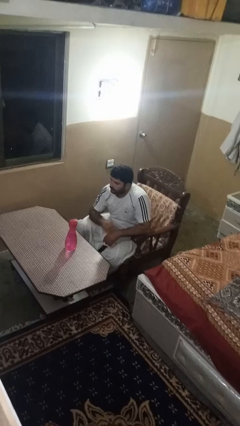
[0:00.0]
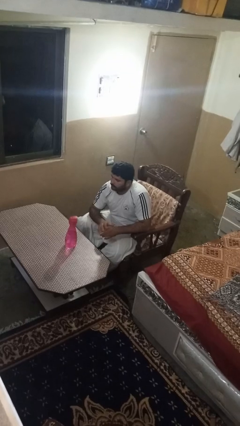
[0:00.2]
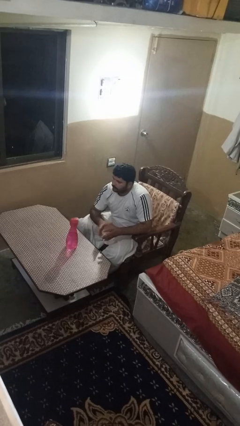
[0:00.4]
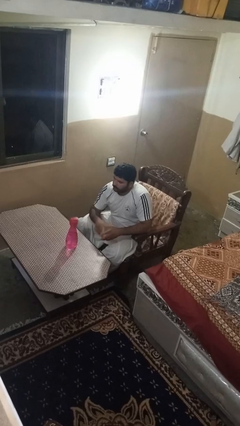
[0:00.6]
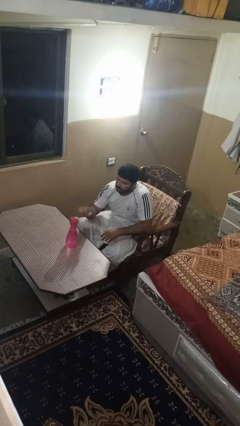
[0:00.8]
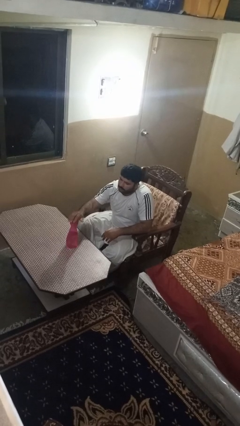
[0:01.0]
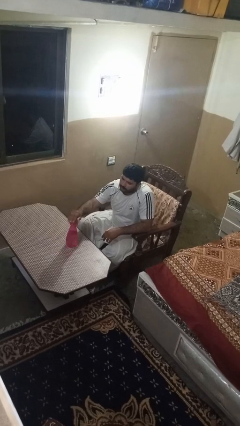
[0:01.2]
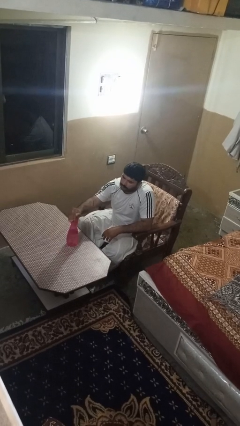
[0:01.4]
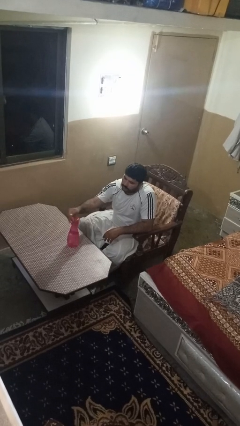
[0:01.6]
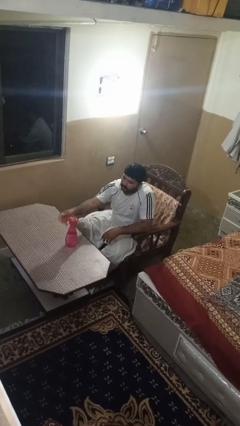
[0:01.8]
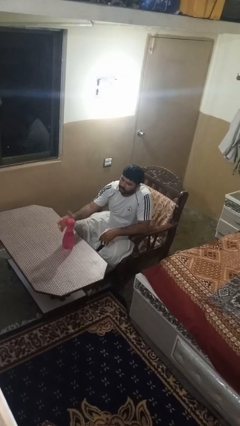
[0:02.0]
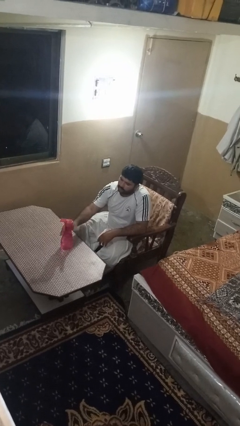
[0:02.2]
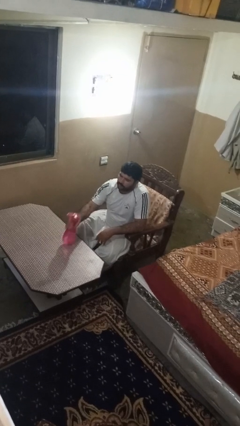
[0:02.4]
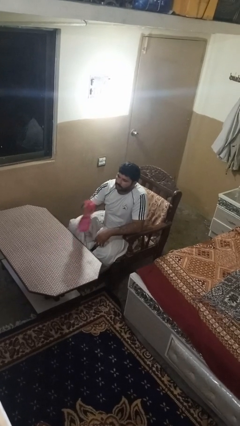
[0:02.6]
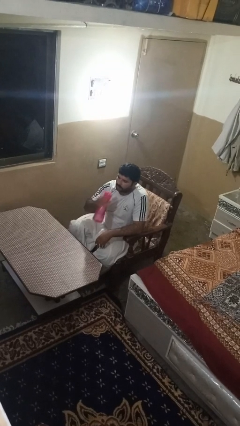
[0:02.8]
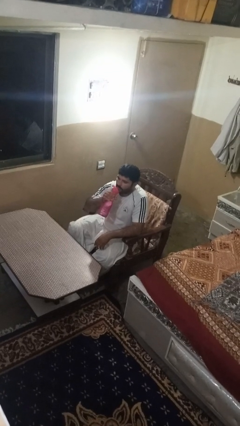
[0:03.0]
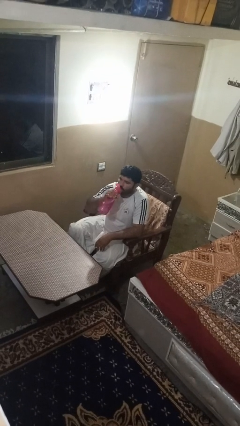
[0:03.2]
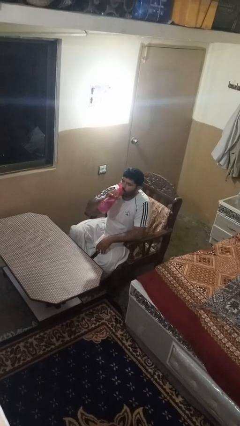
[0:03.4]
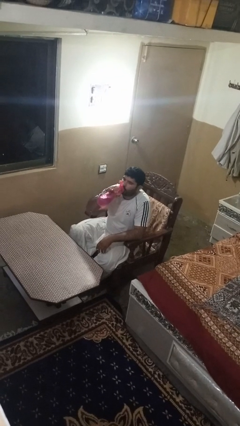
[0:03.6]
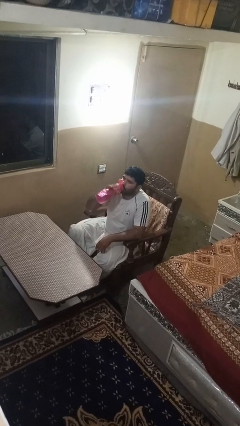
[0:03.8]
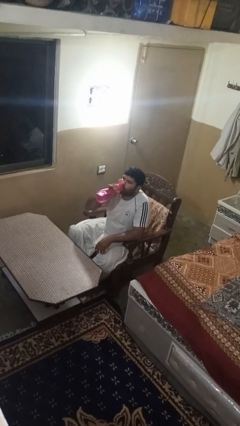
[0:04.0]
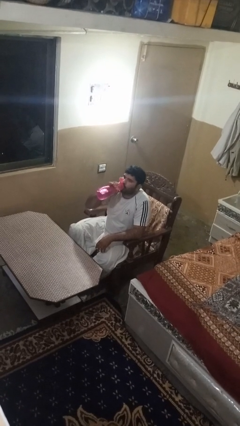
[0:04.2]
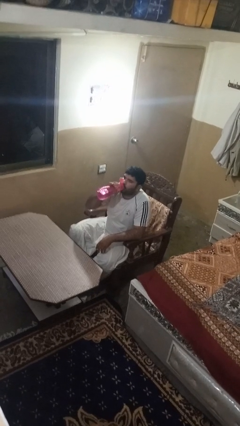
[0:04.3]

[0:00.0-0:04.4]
person drinks from bottle

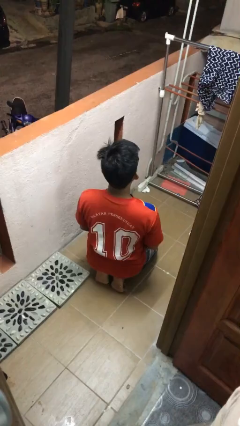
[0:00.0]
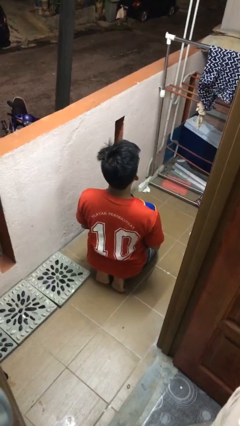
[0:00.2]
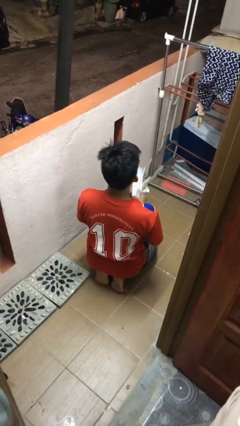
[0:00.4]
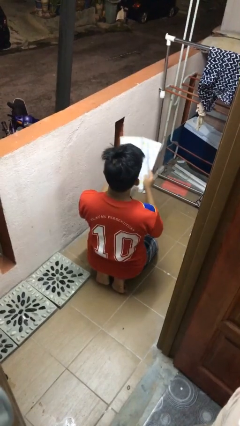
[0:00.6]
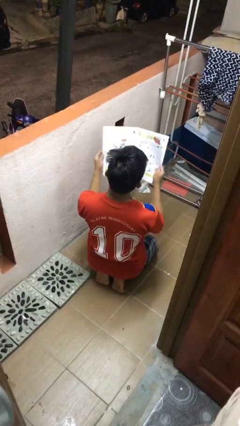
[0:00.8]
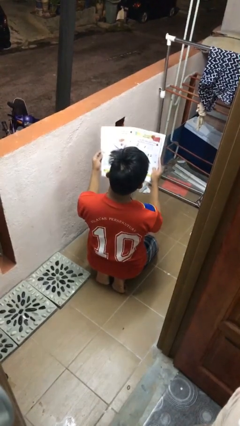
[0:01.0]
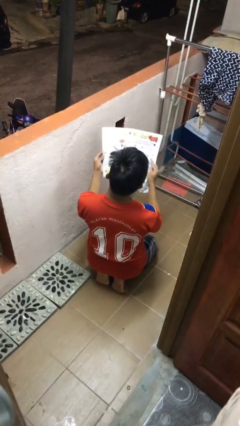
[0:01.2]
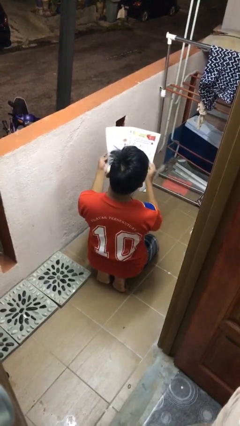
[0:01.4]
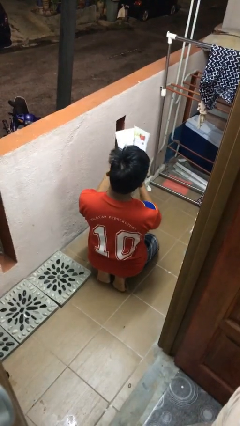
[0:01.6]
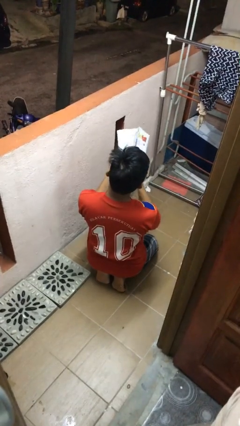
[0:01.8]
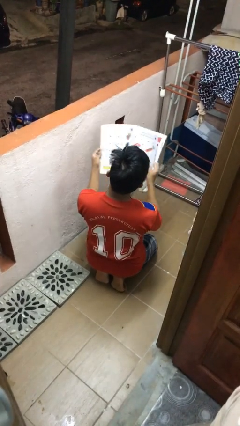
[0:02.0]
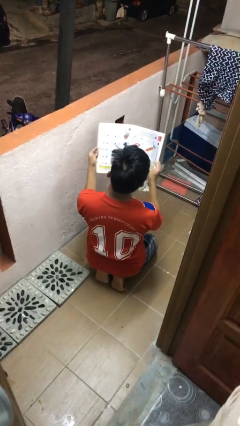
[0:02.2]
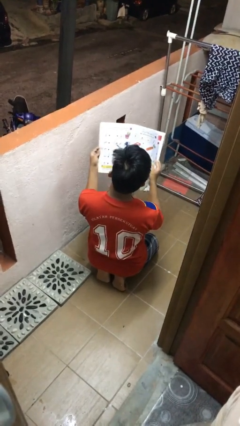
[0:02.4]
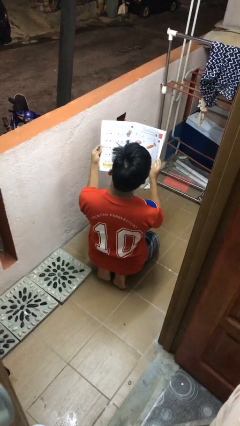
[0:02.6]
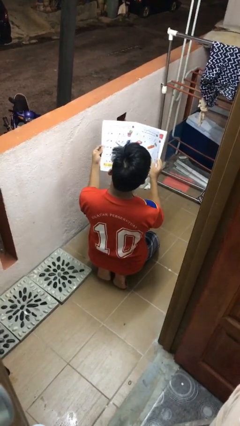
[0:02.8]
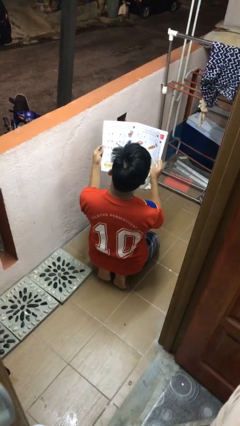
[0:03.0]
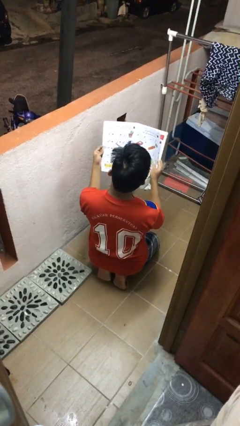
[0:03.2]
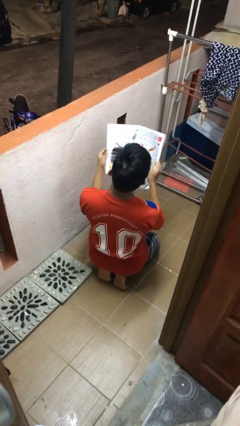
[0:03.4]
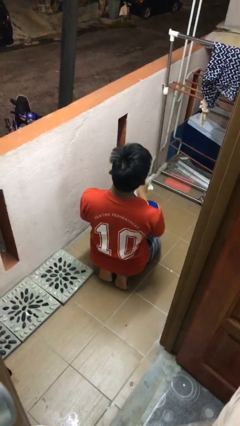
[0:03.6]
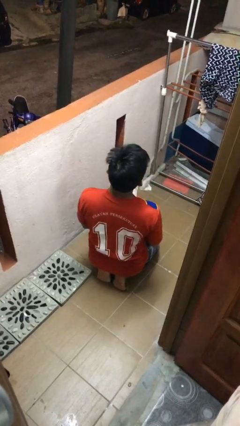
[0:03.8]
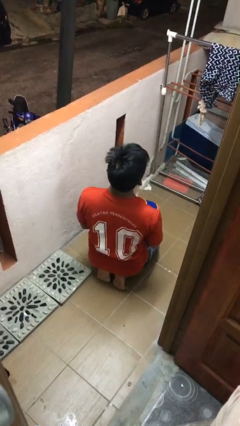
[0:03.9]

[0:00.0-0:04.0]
person reads magazine

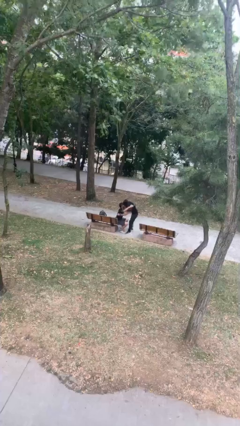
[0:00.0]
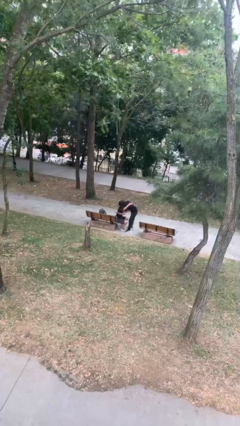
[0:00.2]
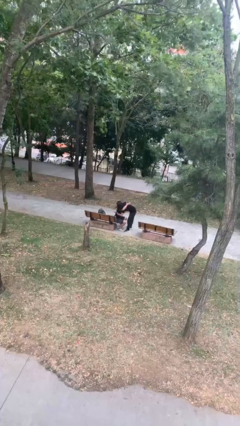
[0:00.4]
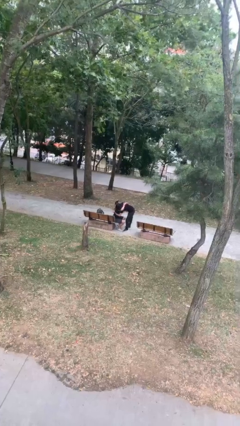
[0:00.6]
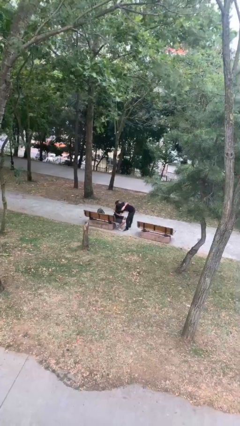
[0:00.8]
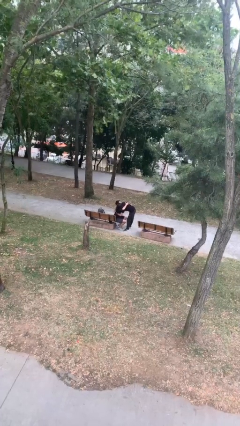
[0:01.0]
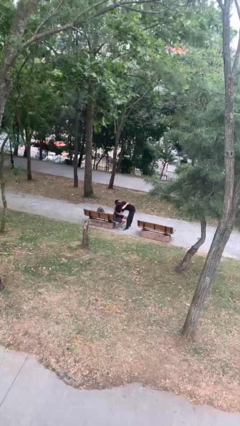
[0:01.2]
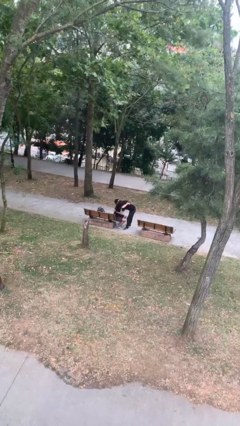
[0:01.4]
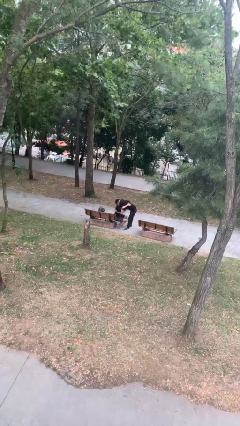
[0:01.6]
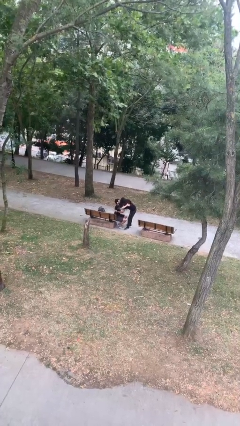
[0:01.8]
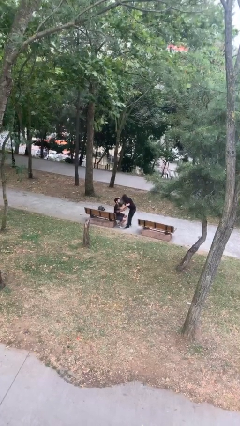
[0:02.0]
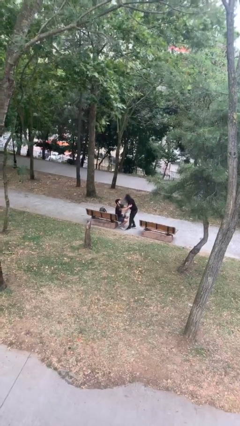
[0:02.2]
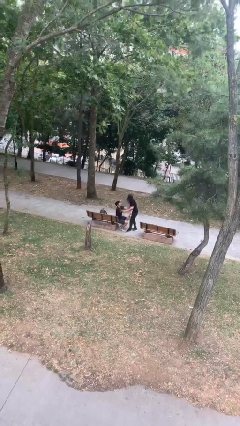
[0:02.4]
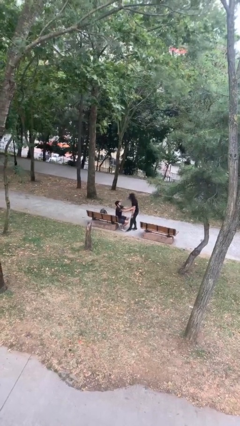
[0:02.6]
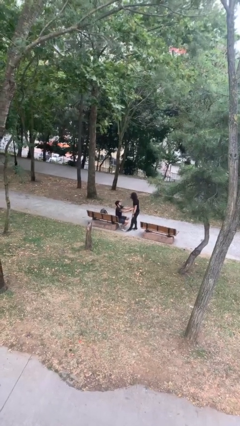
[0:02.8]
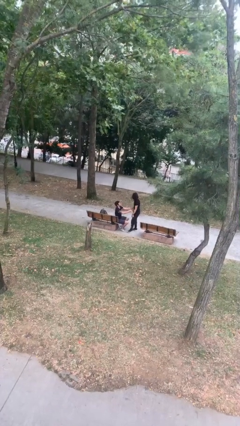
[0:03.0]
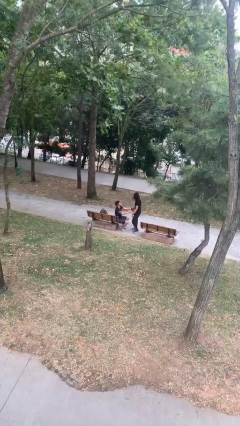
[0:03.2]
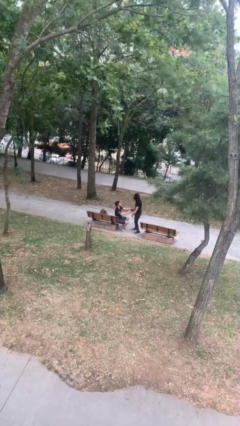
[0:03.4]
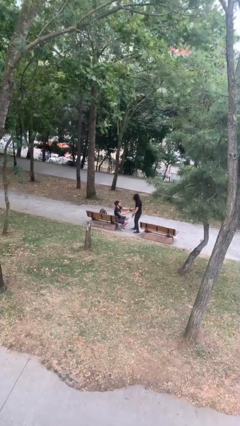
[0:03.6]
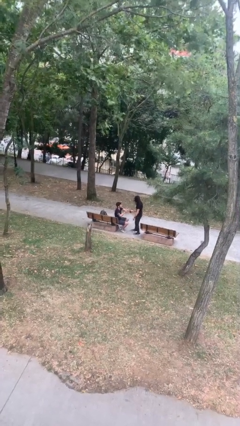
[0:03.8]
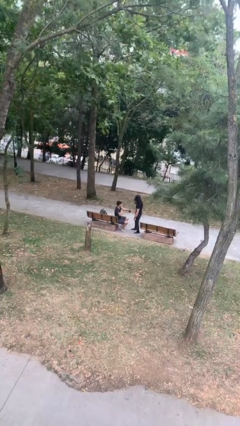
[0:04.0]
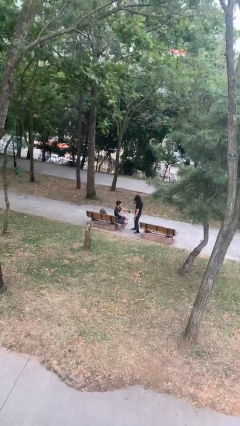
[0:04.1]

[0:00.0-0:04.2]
person embraces person

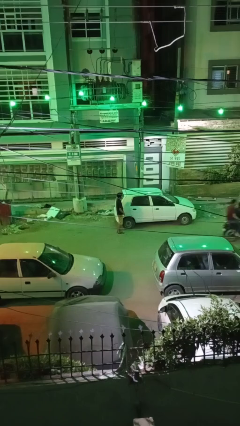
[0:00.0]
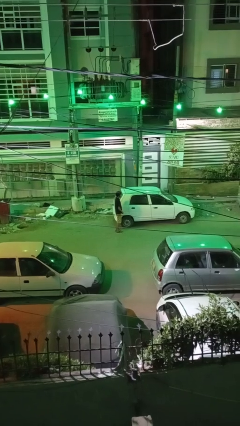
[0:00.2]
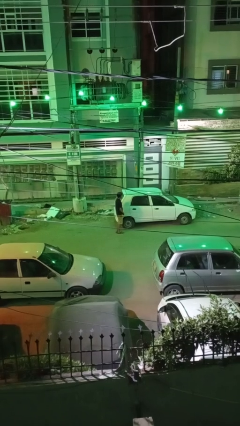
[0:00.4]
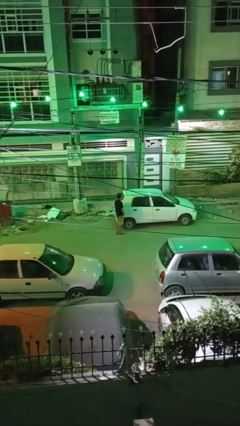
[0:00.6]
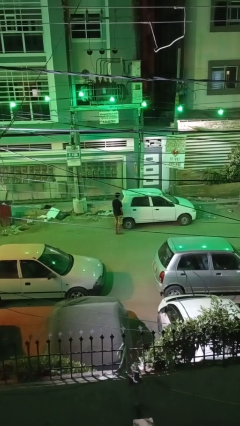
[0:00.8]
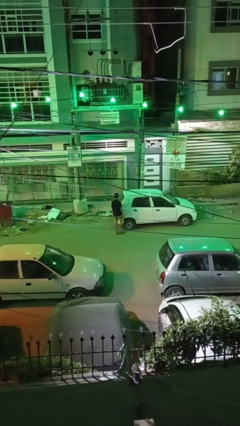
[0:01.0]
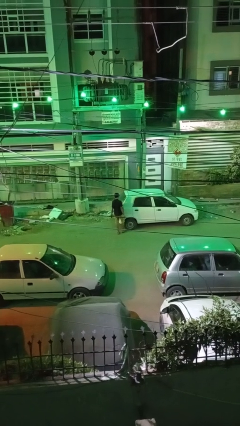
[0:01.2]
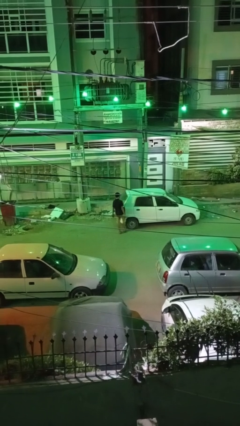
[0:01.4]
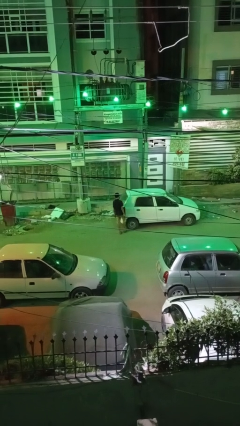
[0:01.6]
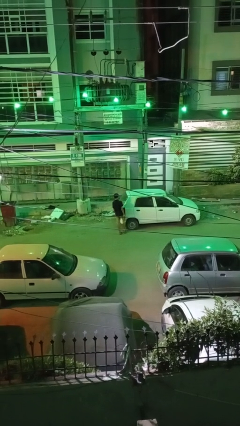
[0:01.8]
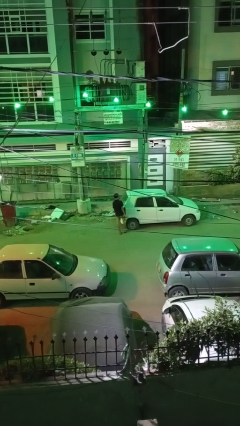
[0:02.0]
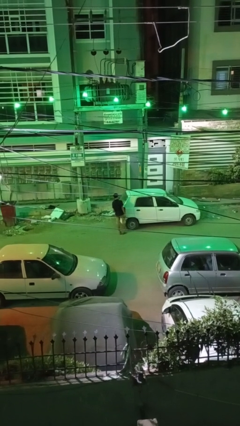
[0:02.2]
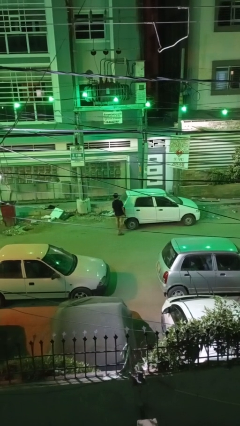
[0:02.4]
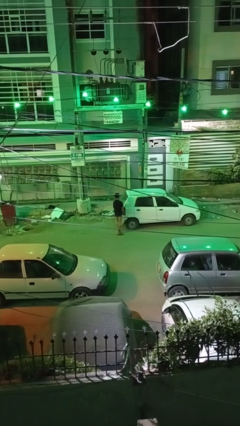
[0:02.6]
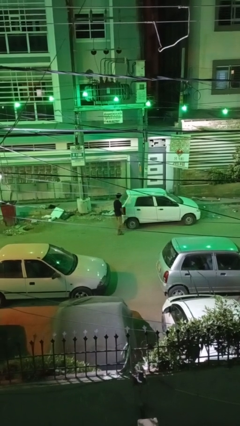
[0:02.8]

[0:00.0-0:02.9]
person kicks car tires

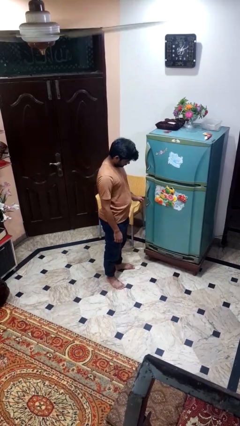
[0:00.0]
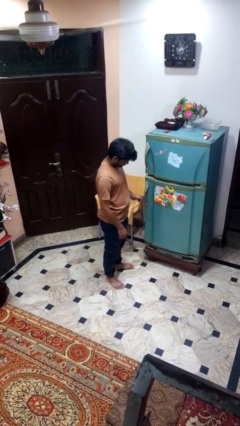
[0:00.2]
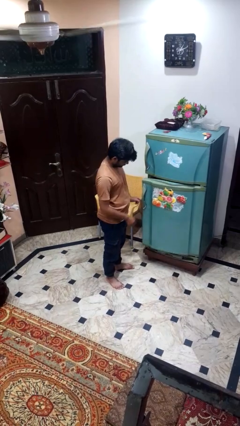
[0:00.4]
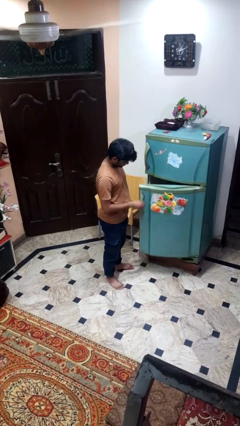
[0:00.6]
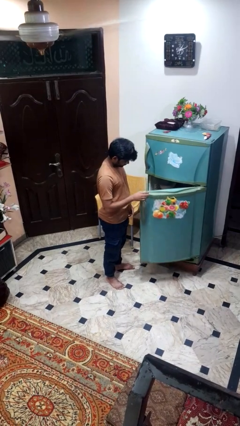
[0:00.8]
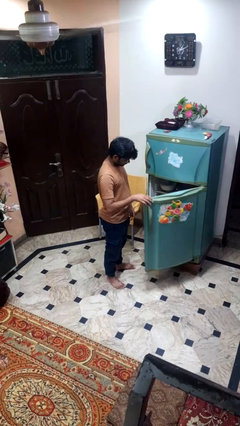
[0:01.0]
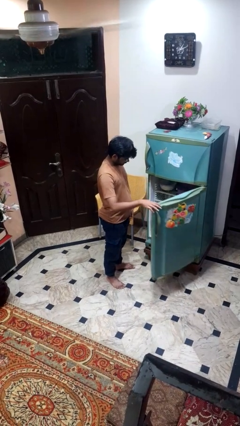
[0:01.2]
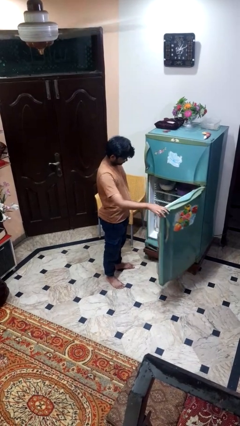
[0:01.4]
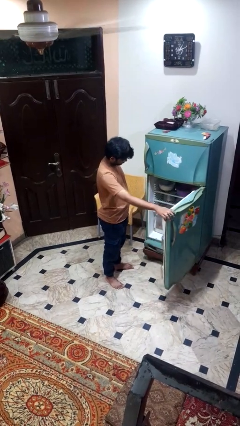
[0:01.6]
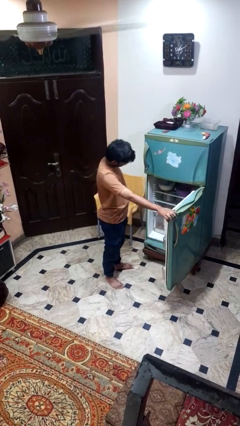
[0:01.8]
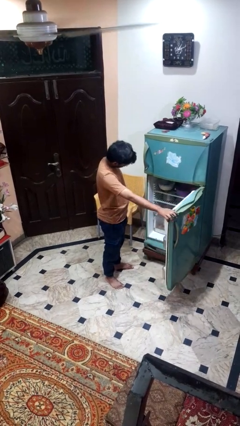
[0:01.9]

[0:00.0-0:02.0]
person opens refrigerator
